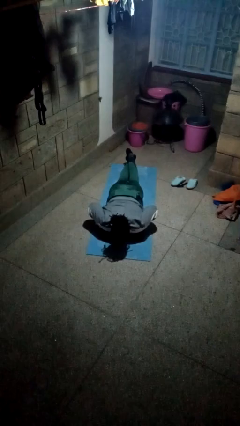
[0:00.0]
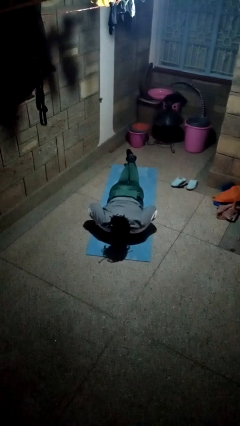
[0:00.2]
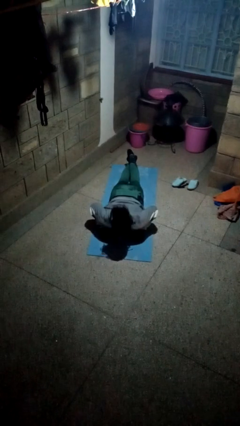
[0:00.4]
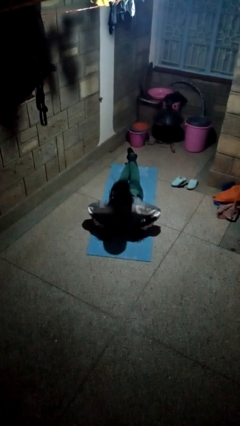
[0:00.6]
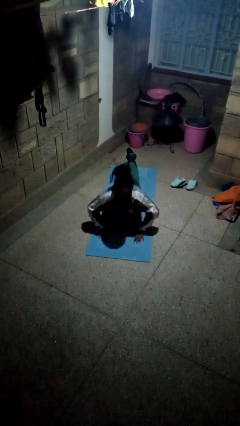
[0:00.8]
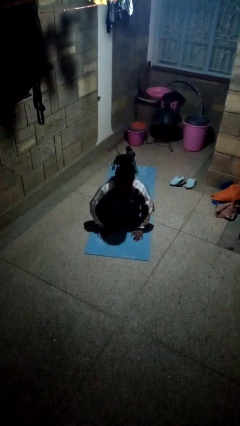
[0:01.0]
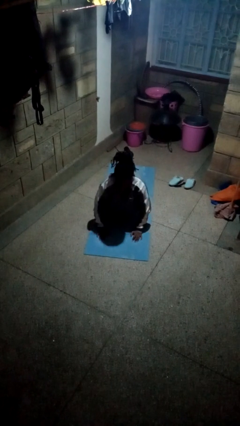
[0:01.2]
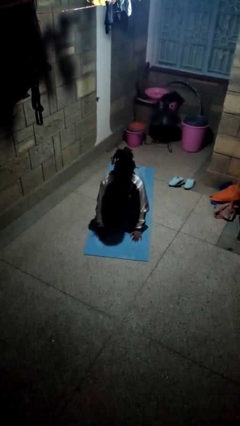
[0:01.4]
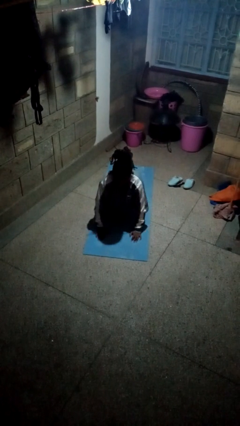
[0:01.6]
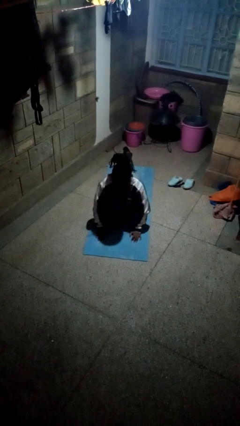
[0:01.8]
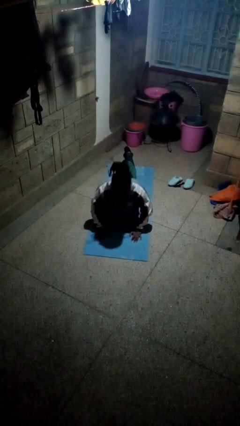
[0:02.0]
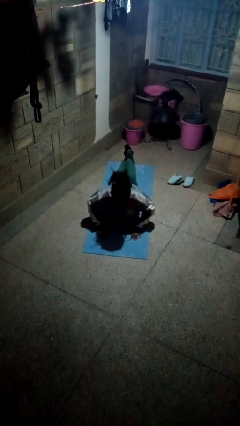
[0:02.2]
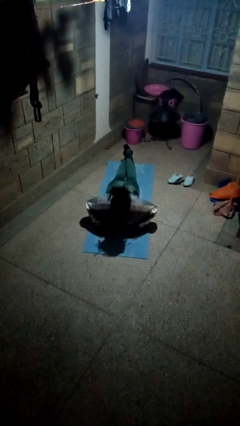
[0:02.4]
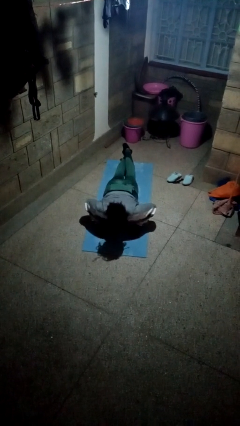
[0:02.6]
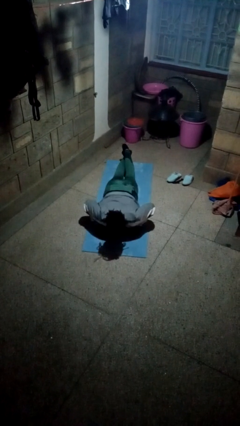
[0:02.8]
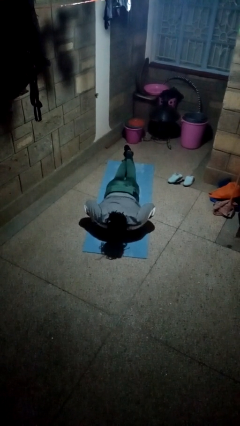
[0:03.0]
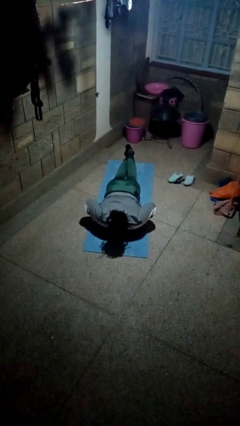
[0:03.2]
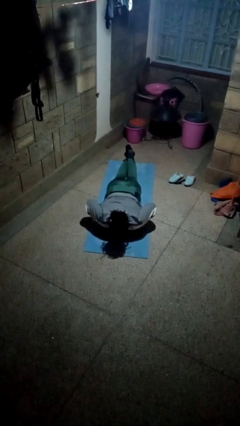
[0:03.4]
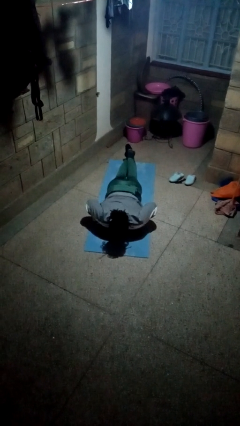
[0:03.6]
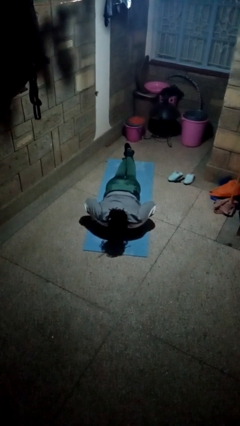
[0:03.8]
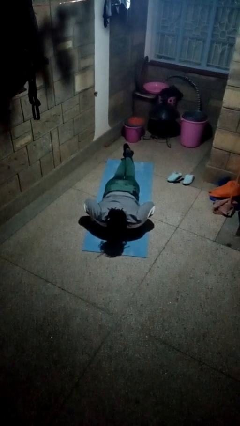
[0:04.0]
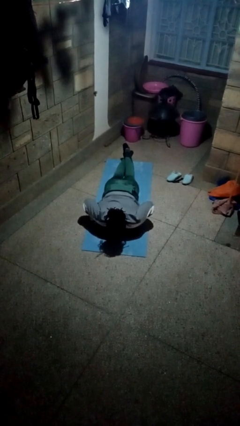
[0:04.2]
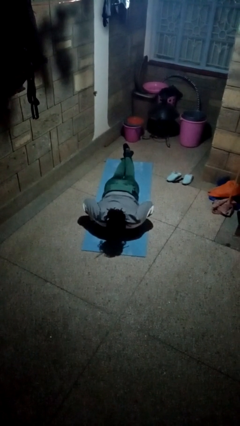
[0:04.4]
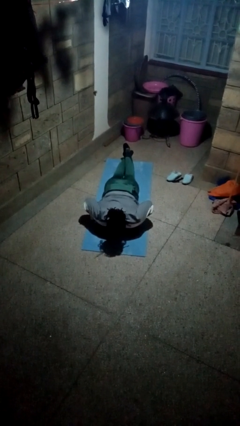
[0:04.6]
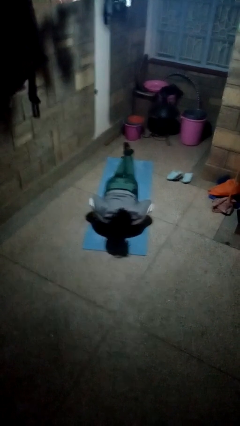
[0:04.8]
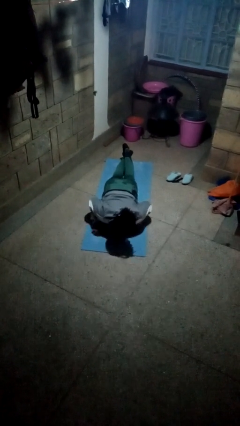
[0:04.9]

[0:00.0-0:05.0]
person exercises with pushup

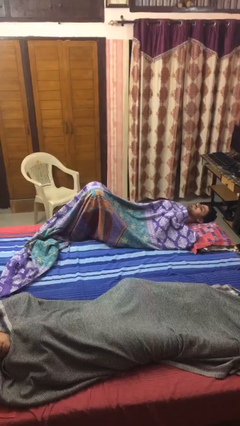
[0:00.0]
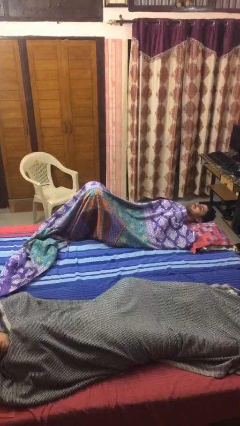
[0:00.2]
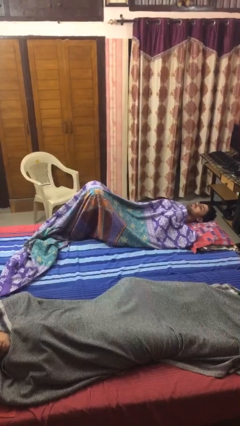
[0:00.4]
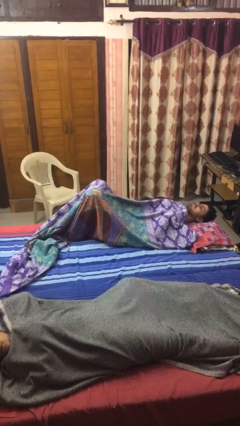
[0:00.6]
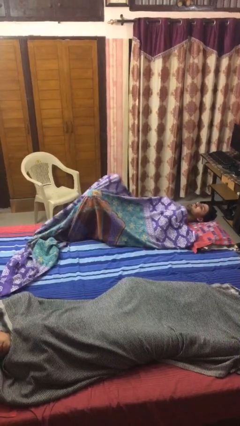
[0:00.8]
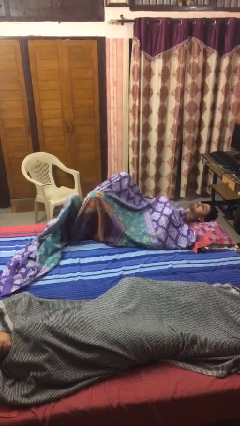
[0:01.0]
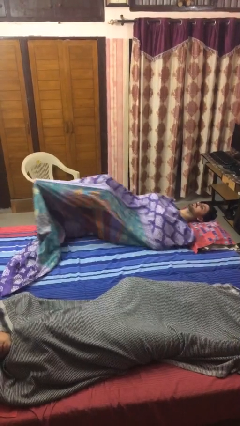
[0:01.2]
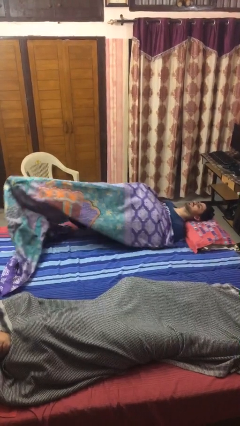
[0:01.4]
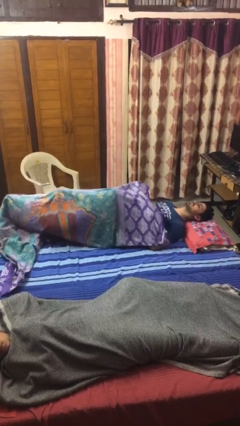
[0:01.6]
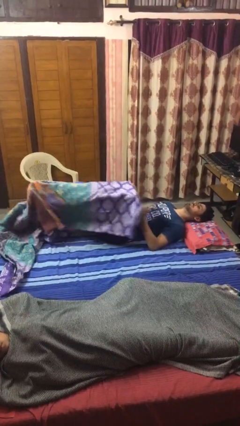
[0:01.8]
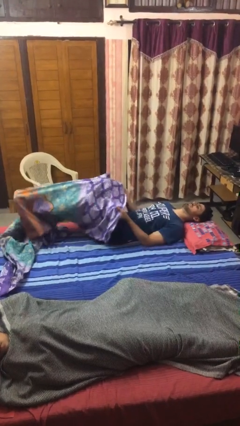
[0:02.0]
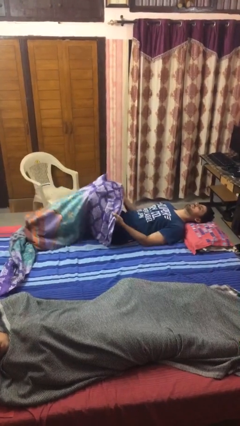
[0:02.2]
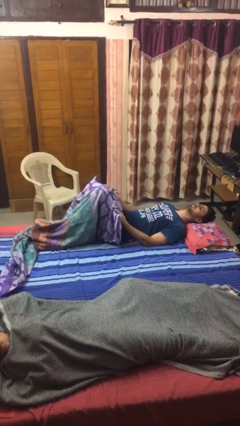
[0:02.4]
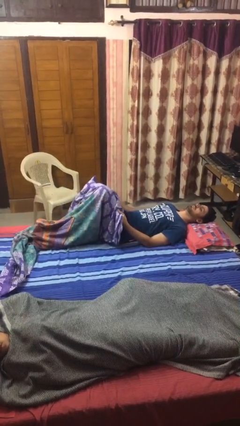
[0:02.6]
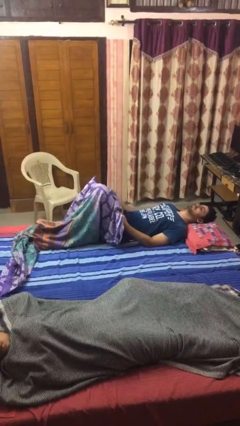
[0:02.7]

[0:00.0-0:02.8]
person uncovers with bedsheets

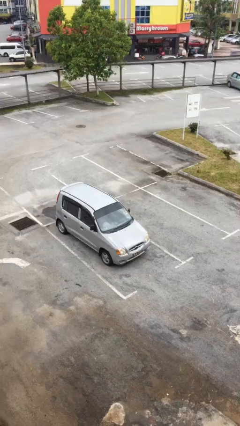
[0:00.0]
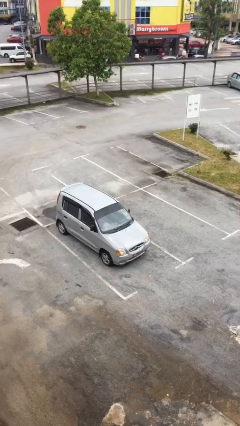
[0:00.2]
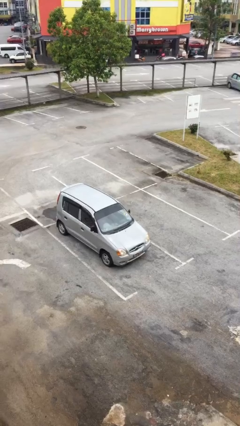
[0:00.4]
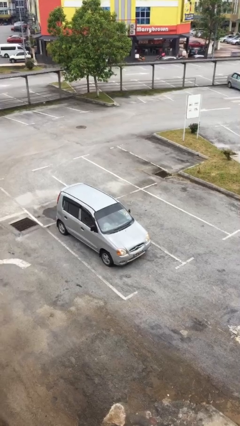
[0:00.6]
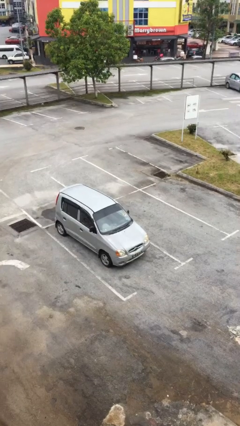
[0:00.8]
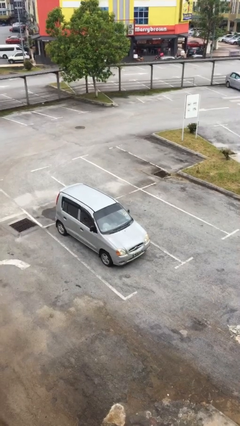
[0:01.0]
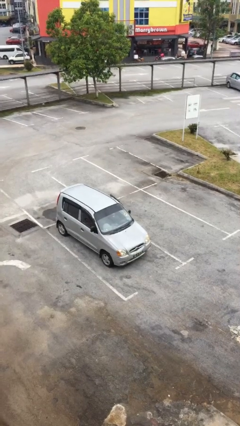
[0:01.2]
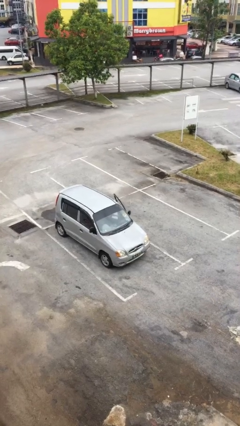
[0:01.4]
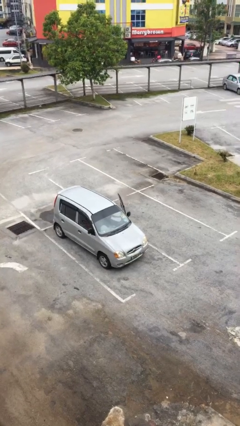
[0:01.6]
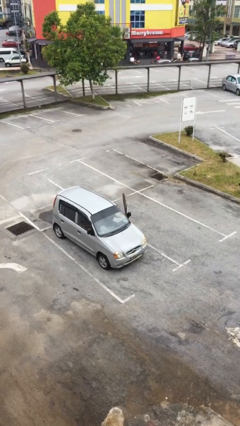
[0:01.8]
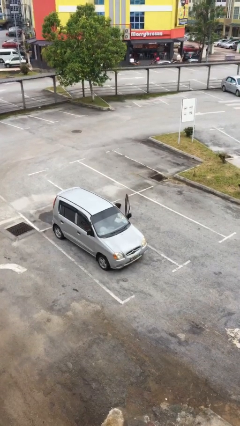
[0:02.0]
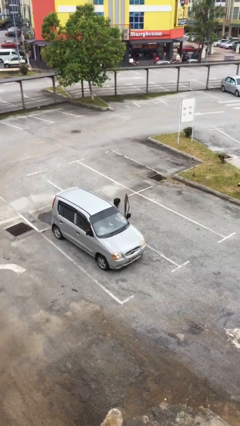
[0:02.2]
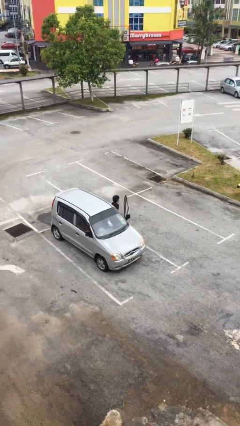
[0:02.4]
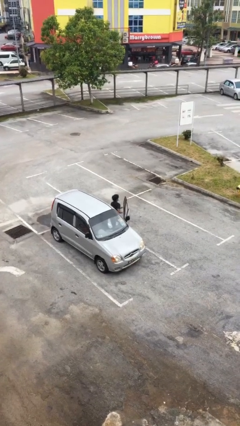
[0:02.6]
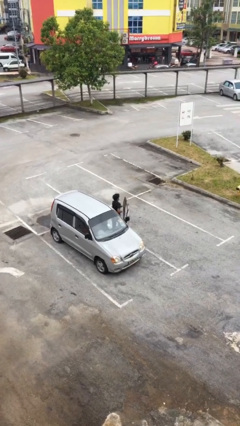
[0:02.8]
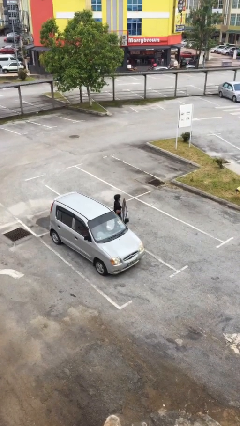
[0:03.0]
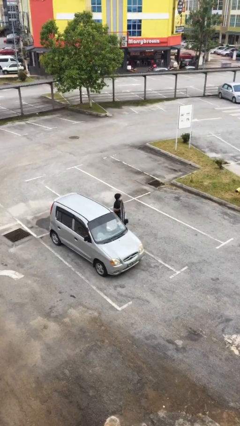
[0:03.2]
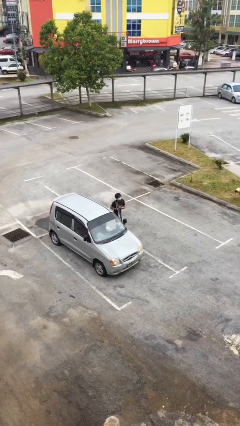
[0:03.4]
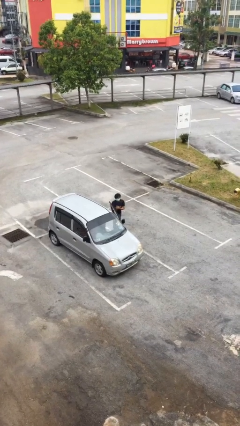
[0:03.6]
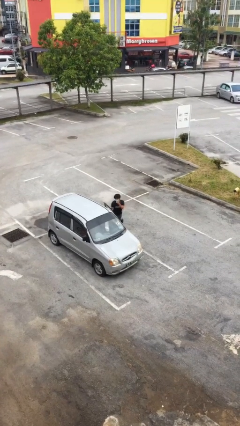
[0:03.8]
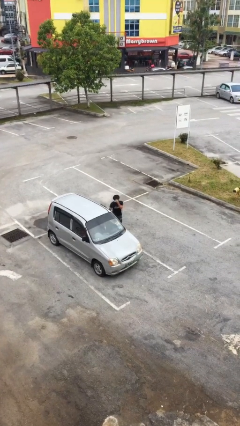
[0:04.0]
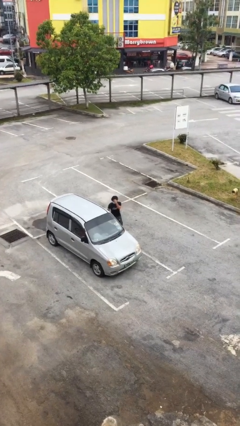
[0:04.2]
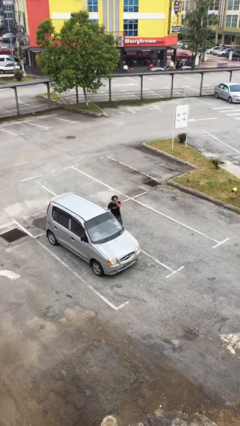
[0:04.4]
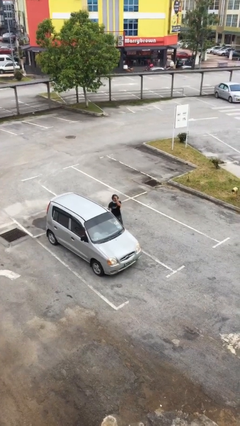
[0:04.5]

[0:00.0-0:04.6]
person exits car

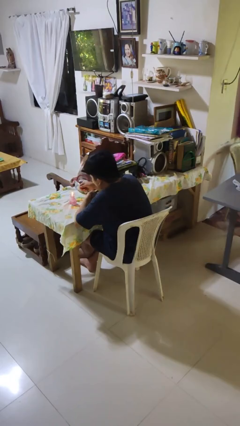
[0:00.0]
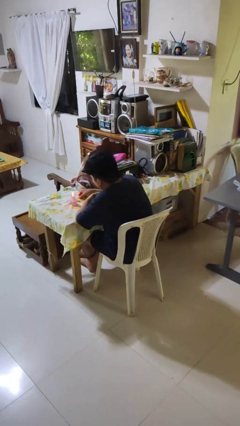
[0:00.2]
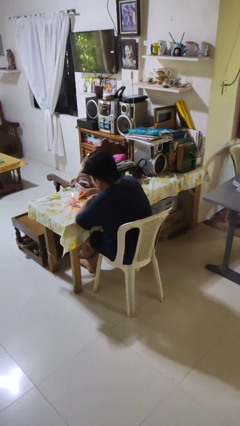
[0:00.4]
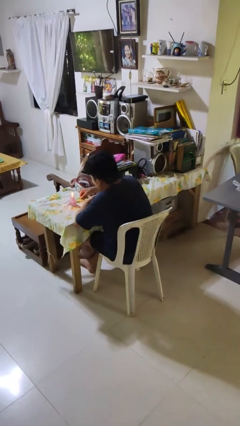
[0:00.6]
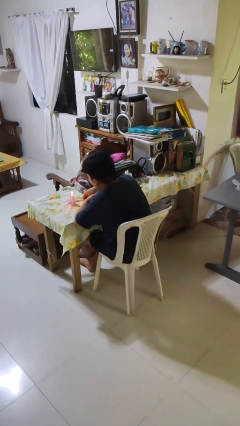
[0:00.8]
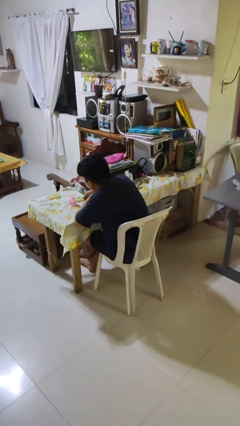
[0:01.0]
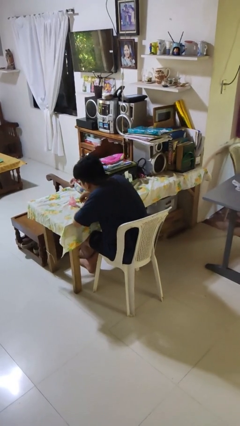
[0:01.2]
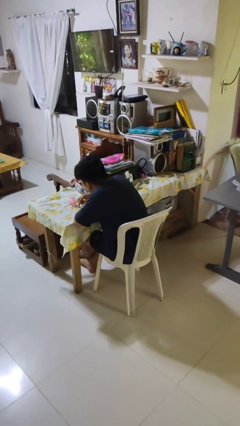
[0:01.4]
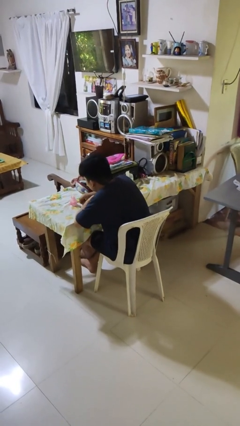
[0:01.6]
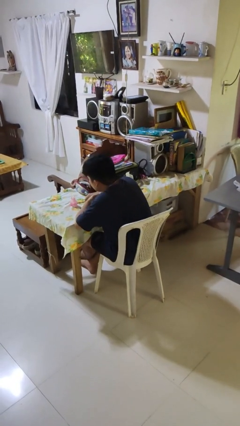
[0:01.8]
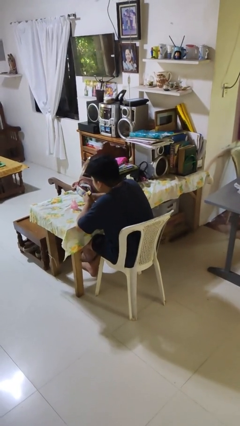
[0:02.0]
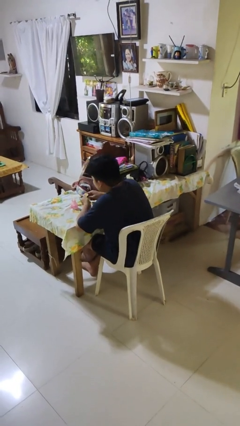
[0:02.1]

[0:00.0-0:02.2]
person extinguishes candle

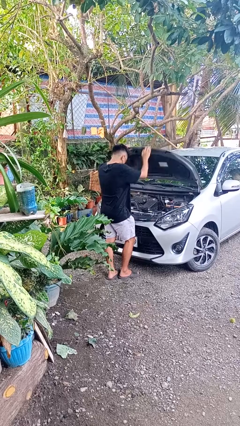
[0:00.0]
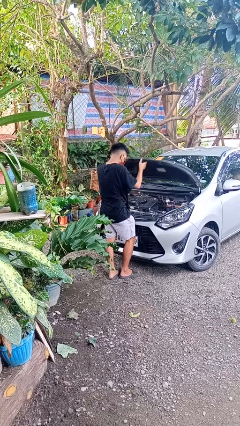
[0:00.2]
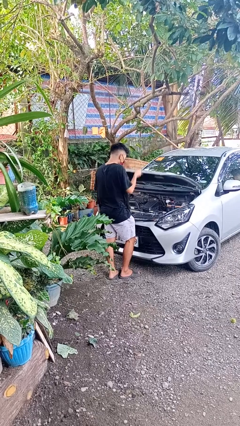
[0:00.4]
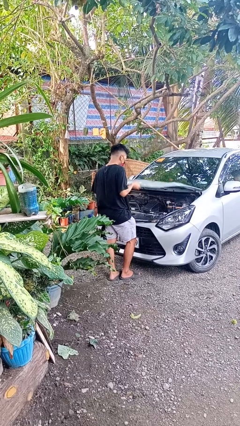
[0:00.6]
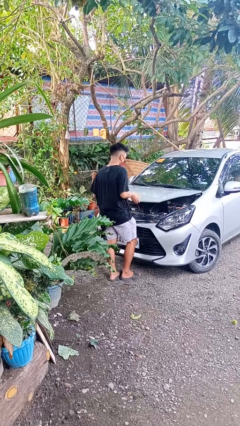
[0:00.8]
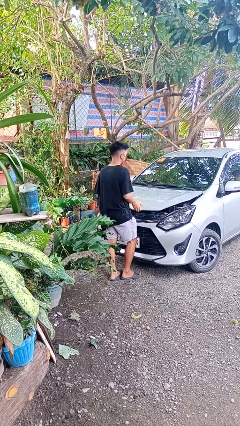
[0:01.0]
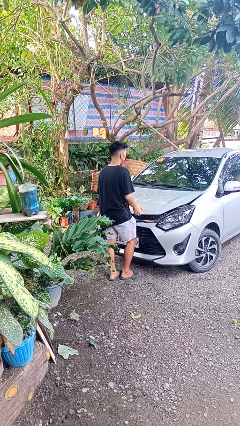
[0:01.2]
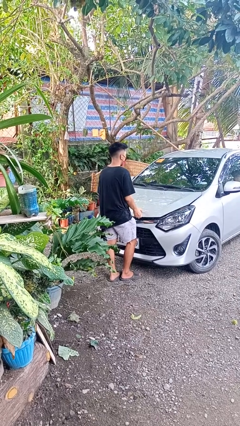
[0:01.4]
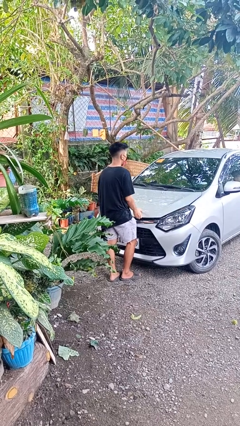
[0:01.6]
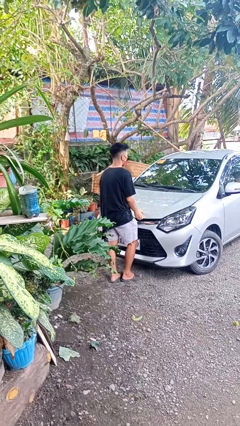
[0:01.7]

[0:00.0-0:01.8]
person closes car hood

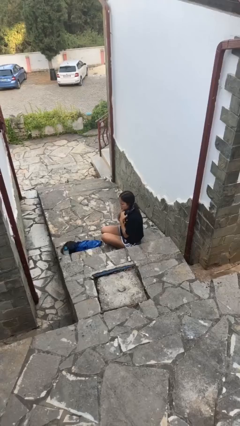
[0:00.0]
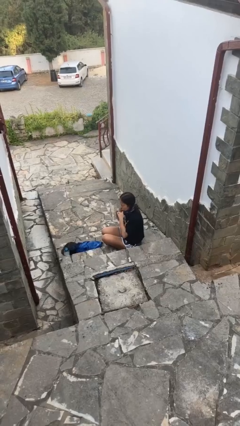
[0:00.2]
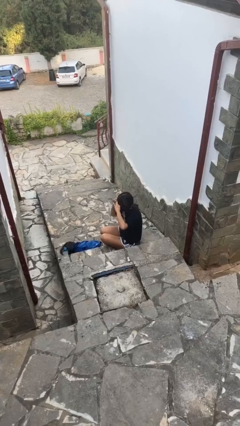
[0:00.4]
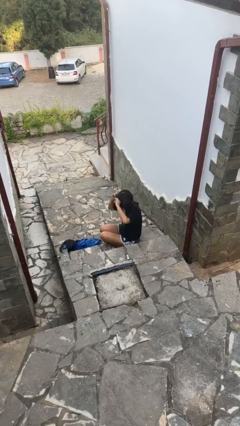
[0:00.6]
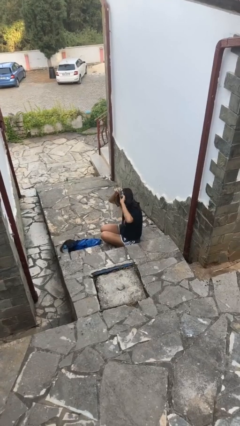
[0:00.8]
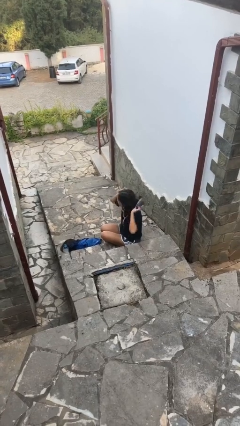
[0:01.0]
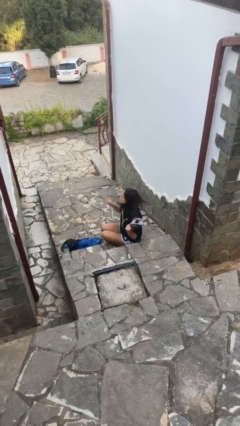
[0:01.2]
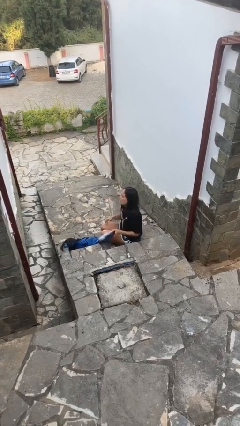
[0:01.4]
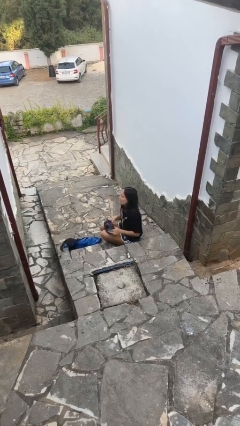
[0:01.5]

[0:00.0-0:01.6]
person takes off scarf
